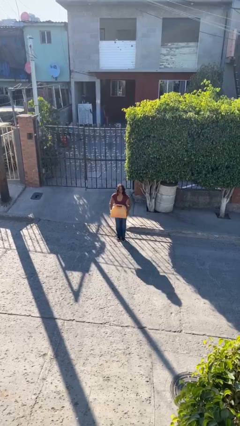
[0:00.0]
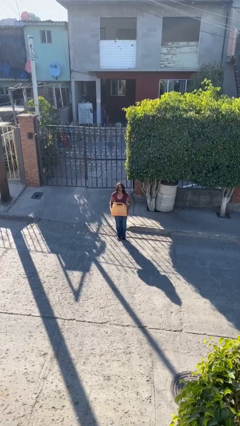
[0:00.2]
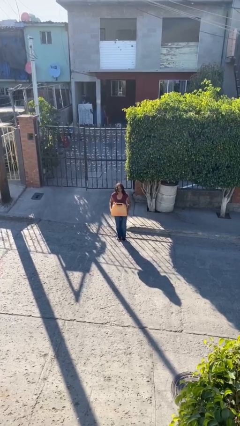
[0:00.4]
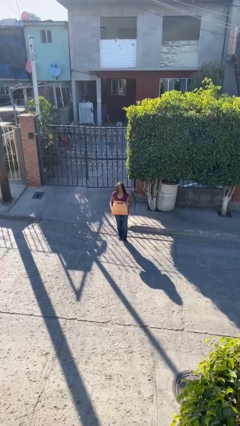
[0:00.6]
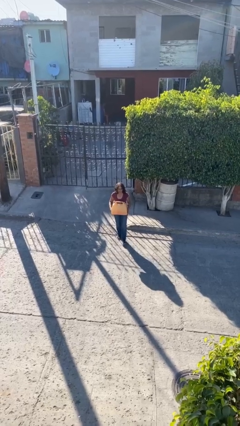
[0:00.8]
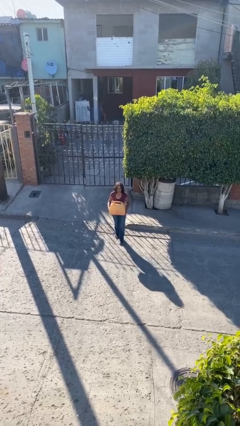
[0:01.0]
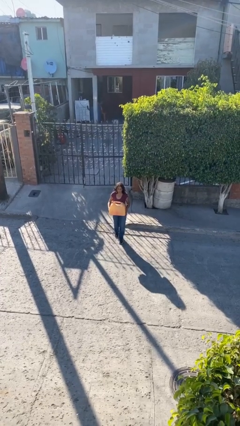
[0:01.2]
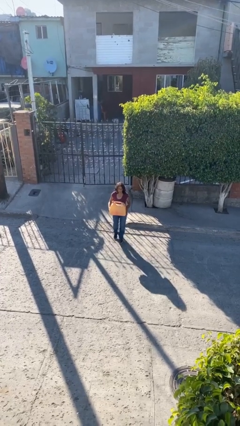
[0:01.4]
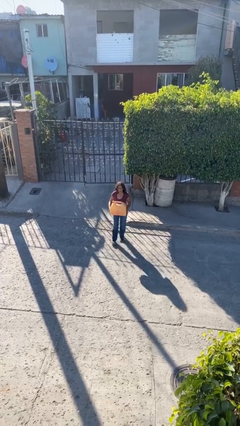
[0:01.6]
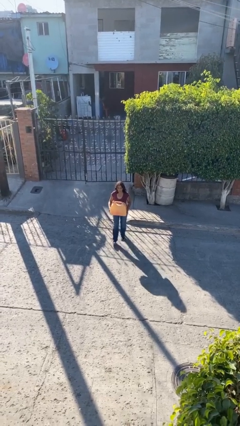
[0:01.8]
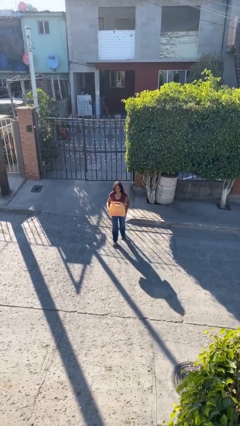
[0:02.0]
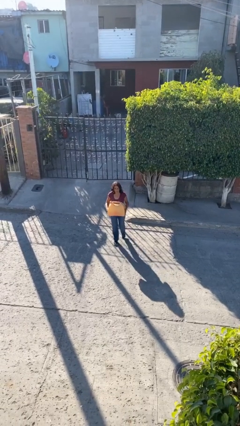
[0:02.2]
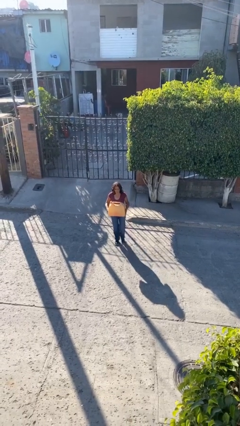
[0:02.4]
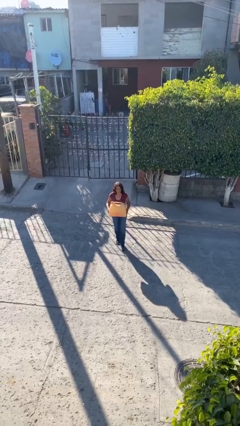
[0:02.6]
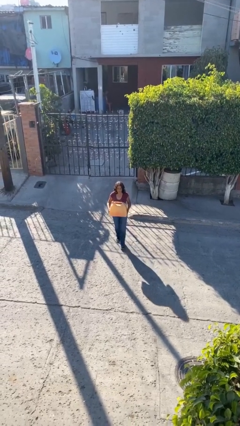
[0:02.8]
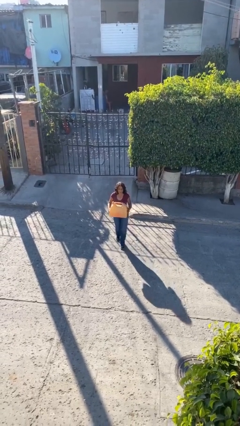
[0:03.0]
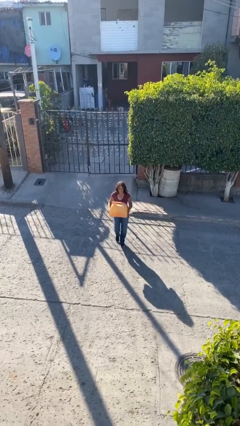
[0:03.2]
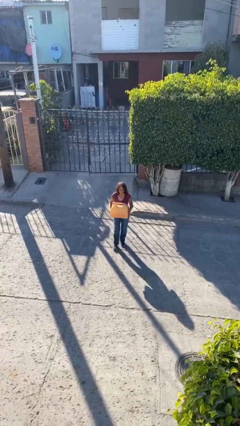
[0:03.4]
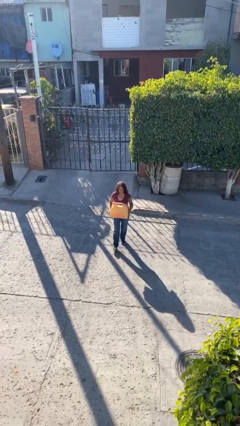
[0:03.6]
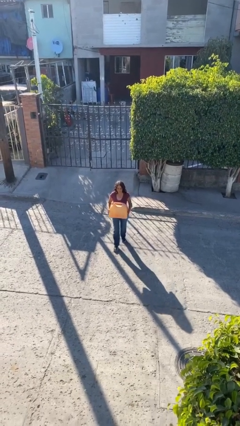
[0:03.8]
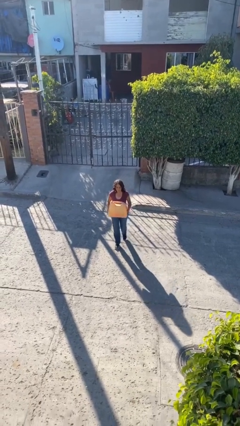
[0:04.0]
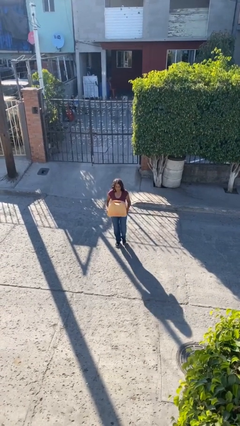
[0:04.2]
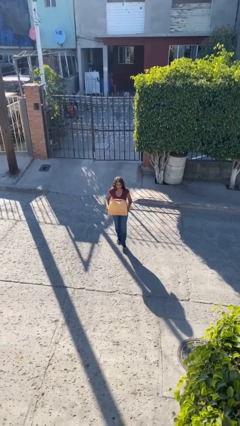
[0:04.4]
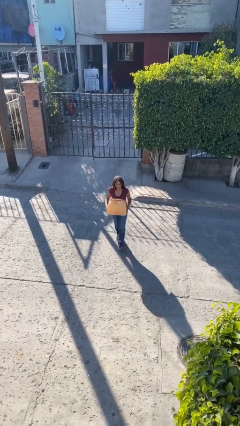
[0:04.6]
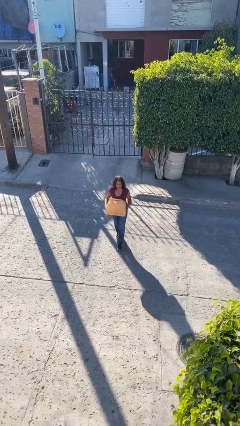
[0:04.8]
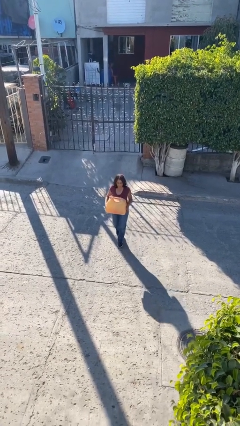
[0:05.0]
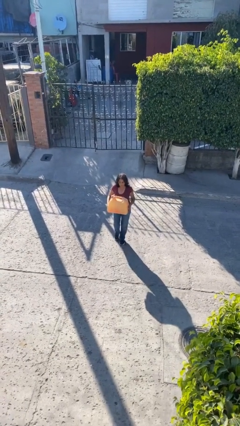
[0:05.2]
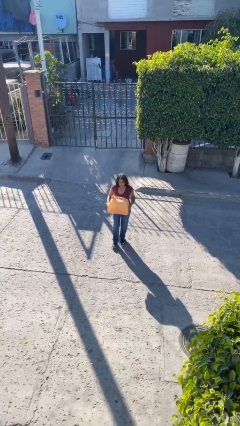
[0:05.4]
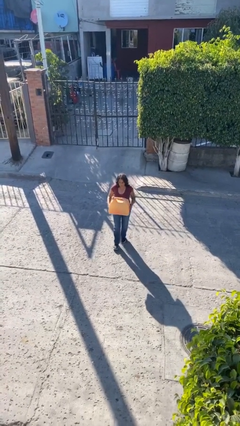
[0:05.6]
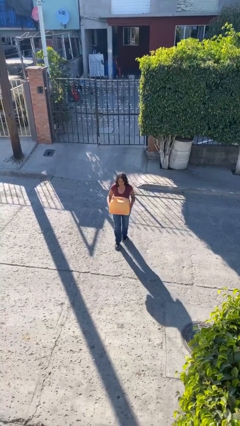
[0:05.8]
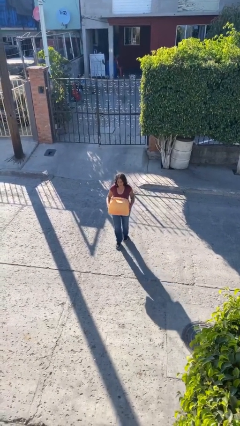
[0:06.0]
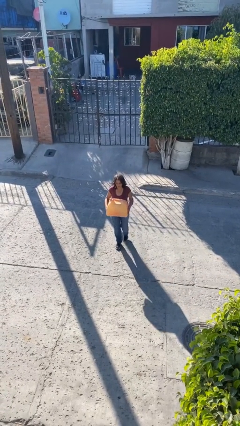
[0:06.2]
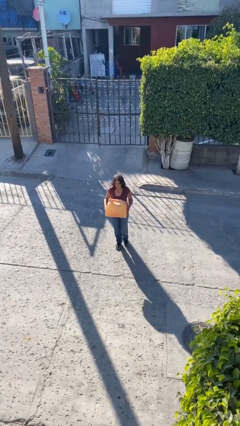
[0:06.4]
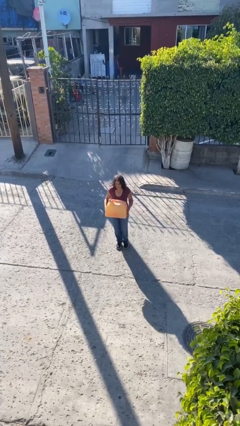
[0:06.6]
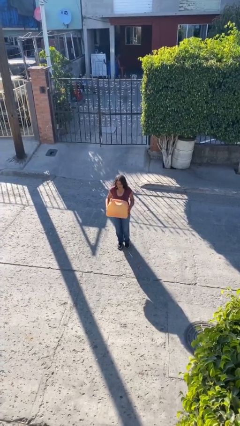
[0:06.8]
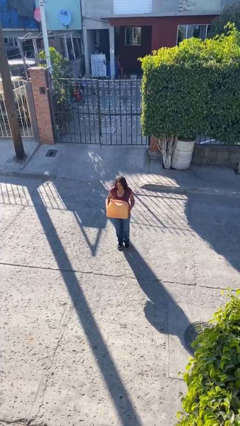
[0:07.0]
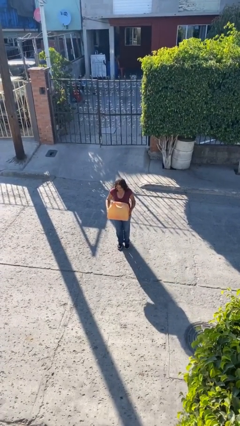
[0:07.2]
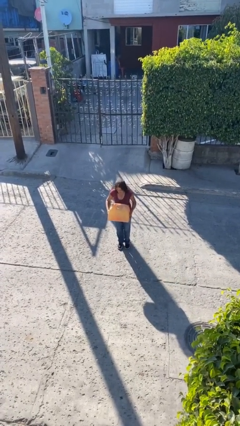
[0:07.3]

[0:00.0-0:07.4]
person carries heavy object

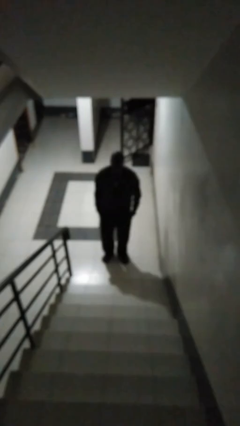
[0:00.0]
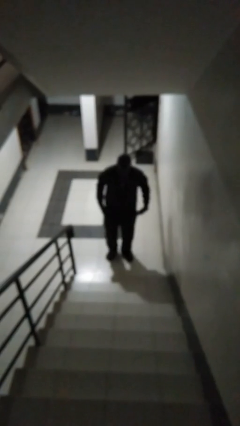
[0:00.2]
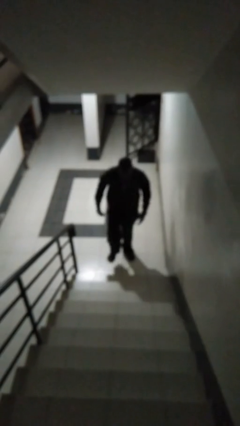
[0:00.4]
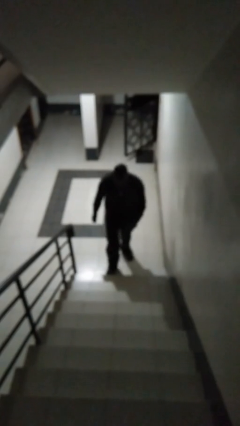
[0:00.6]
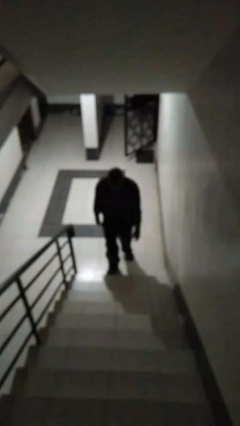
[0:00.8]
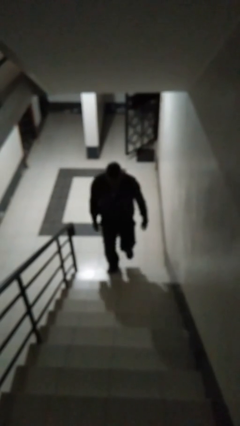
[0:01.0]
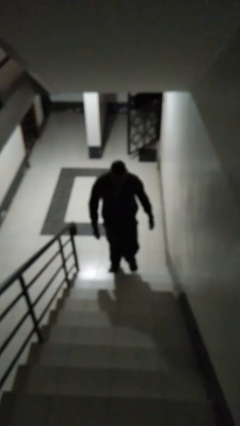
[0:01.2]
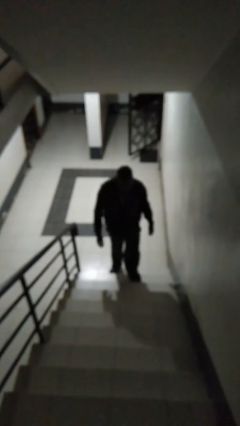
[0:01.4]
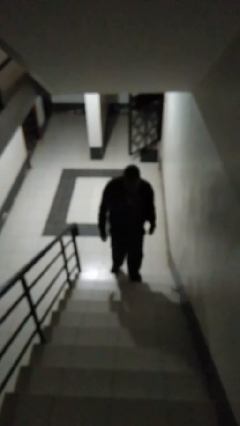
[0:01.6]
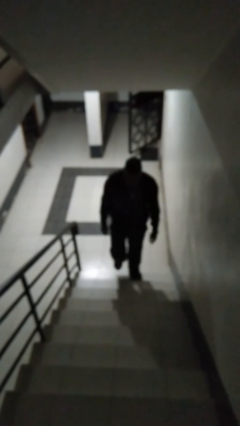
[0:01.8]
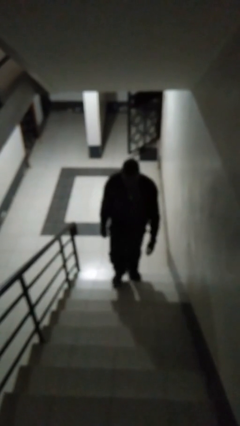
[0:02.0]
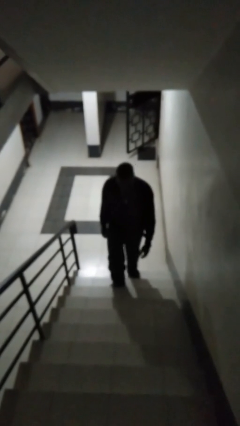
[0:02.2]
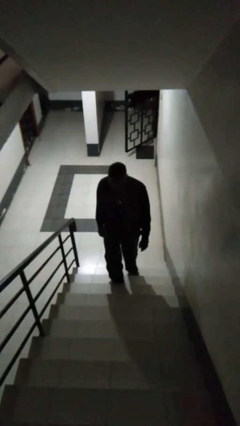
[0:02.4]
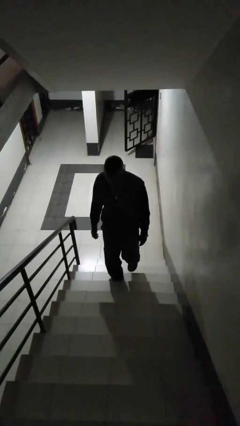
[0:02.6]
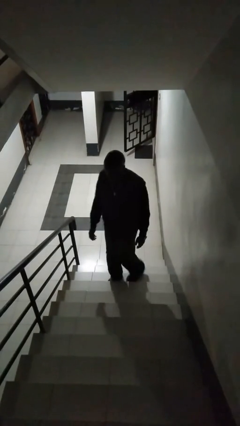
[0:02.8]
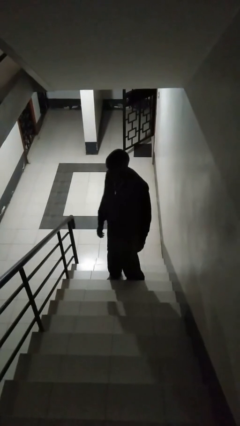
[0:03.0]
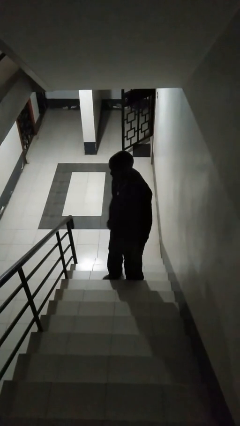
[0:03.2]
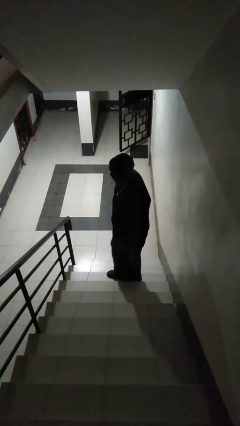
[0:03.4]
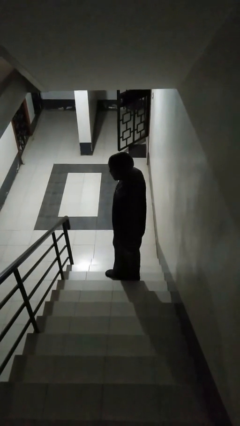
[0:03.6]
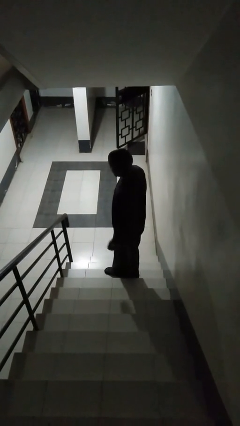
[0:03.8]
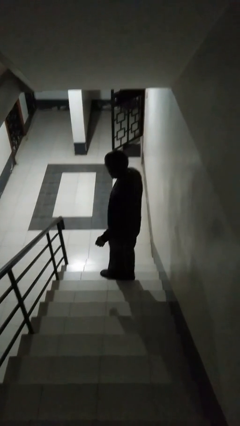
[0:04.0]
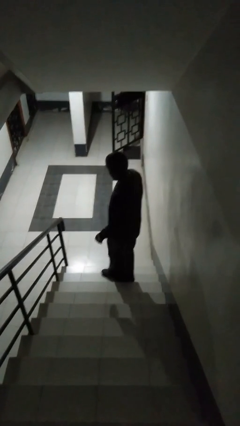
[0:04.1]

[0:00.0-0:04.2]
person climbs up stairs

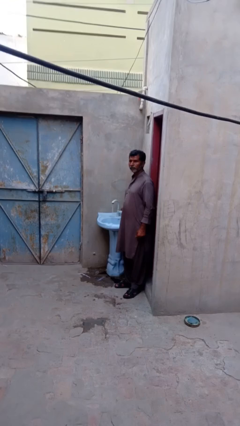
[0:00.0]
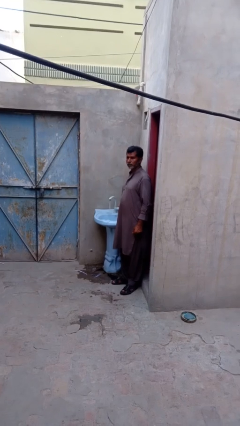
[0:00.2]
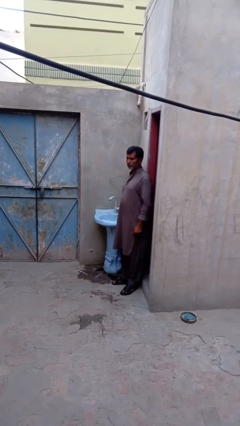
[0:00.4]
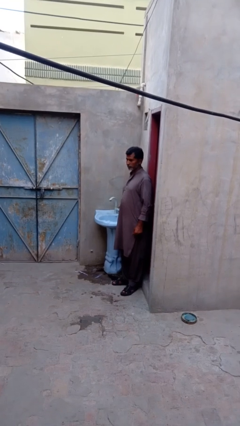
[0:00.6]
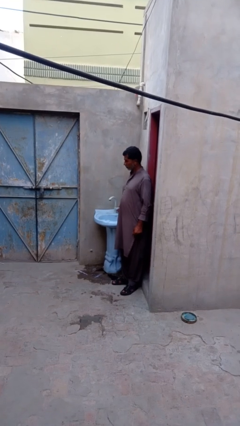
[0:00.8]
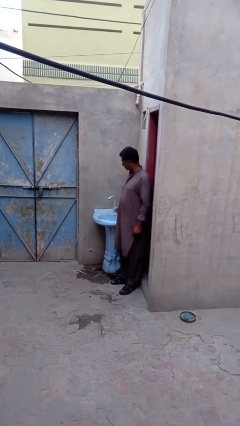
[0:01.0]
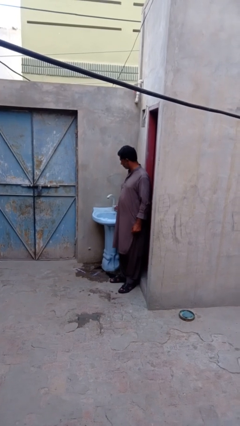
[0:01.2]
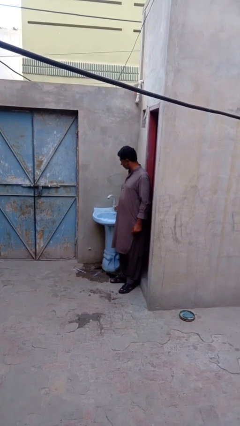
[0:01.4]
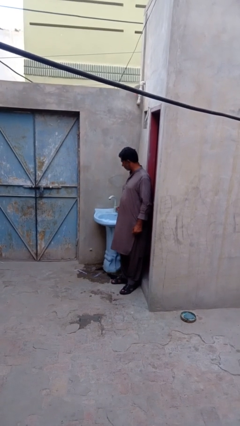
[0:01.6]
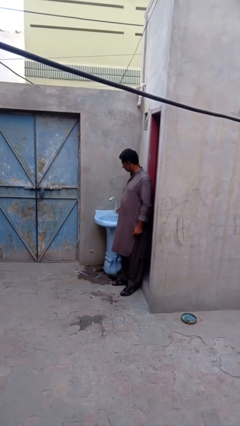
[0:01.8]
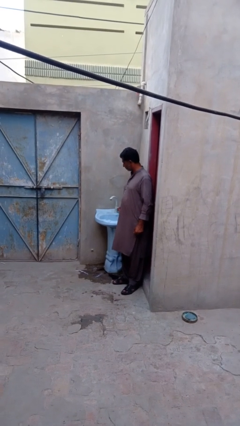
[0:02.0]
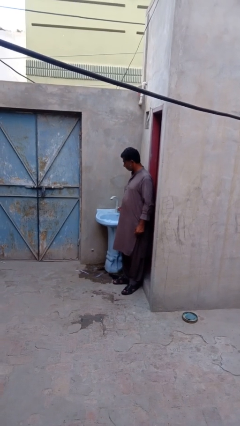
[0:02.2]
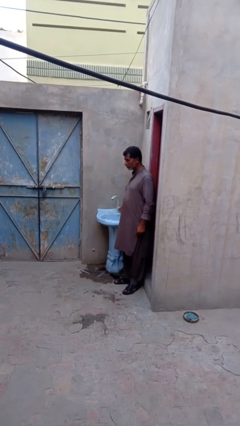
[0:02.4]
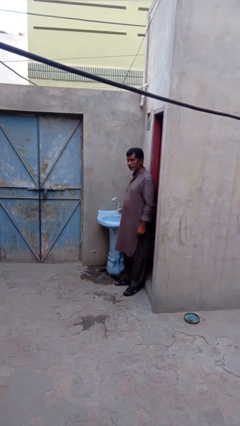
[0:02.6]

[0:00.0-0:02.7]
person turns off faucet

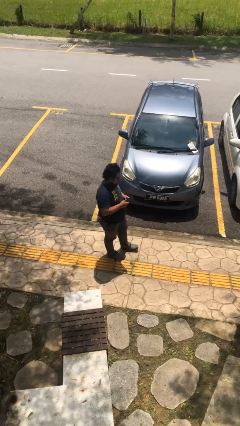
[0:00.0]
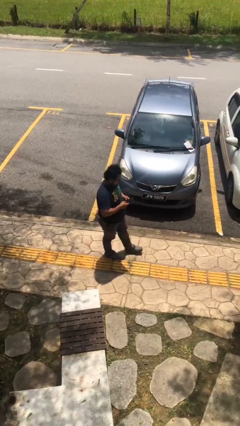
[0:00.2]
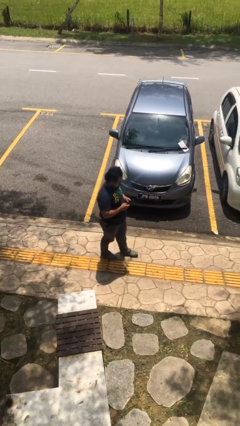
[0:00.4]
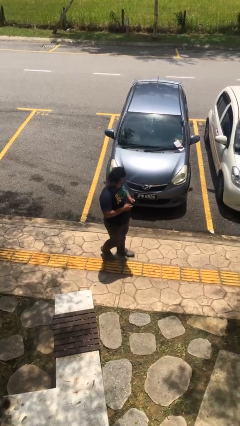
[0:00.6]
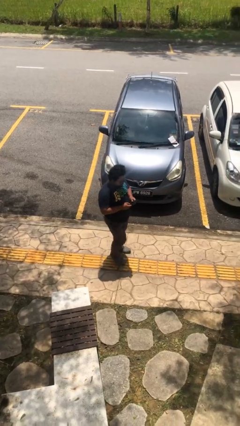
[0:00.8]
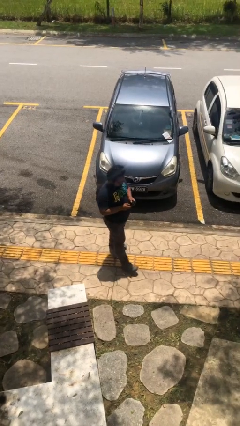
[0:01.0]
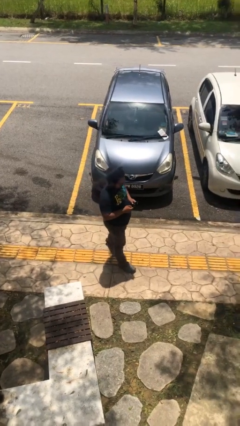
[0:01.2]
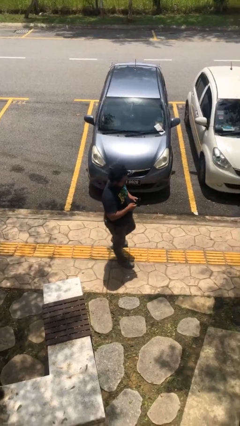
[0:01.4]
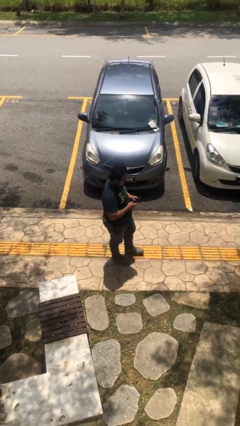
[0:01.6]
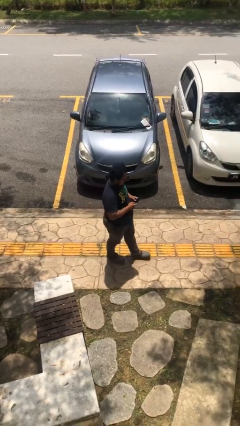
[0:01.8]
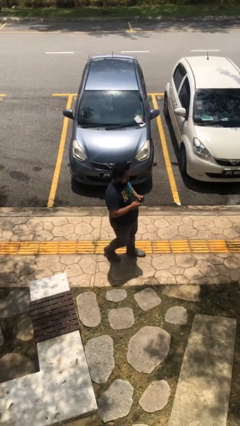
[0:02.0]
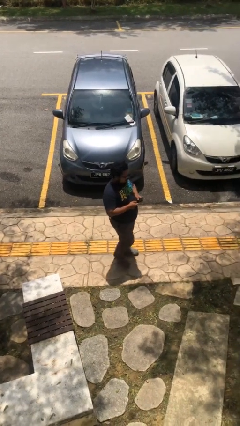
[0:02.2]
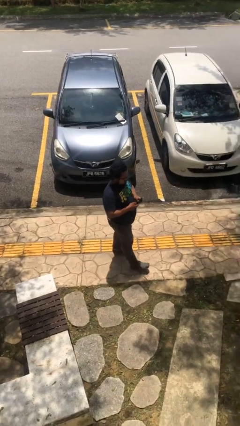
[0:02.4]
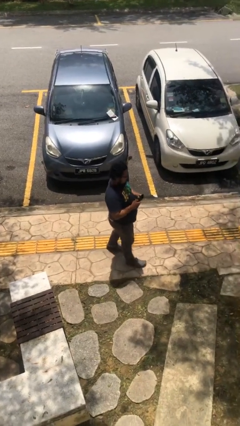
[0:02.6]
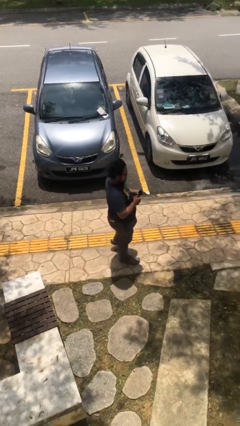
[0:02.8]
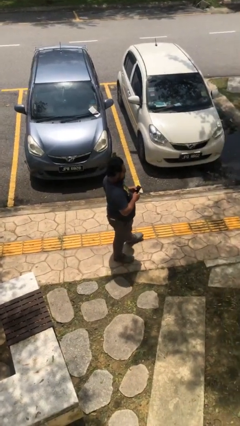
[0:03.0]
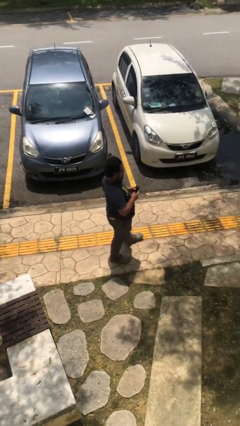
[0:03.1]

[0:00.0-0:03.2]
person texts on phone
